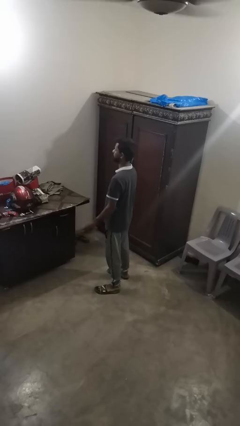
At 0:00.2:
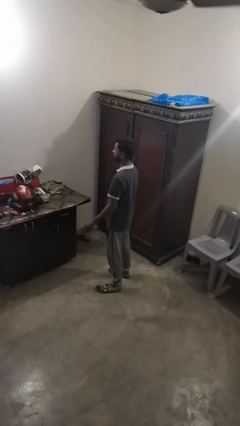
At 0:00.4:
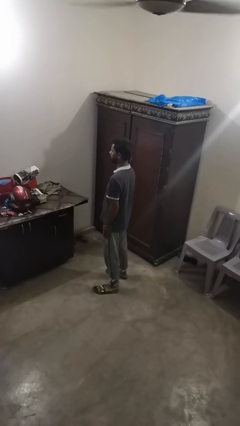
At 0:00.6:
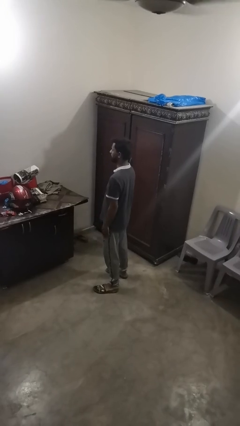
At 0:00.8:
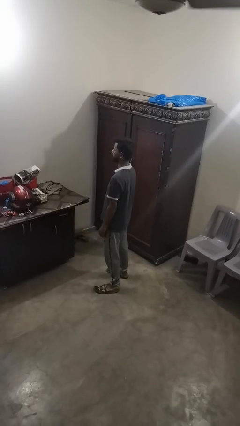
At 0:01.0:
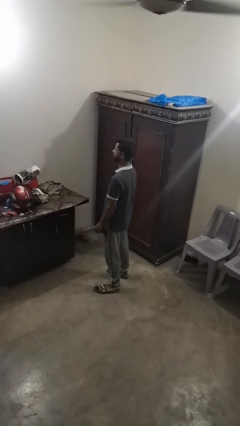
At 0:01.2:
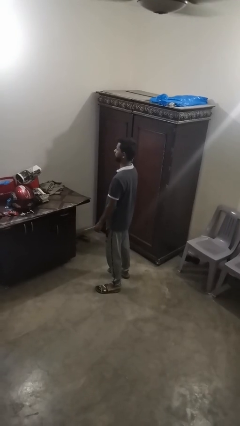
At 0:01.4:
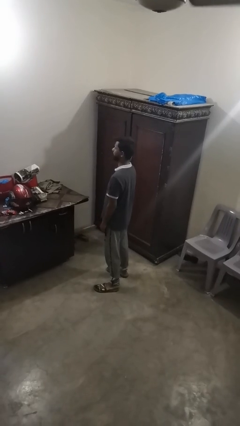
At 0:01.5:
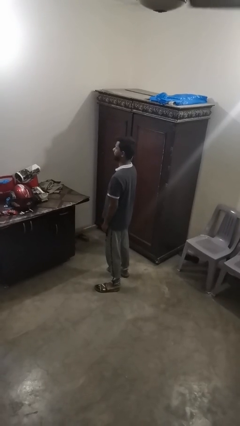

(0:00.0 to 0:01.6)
person slaps hands on thighs

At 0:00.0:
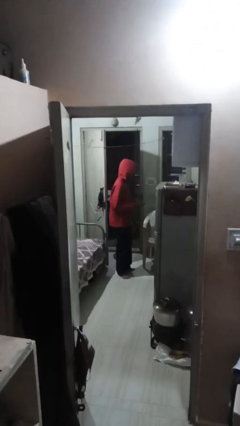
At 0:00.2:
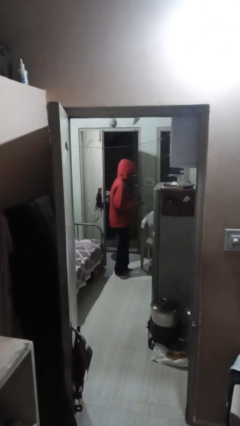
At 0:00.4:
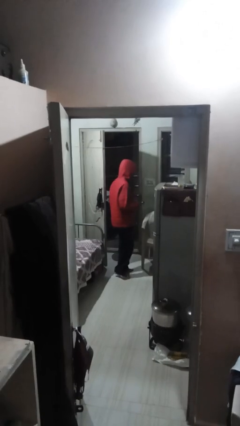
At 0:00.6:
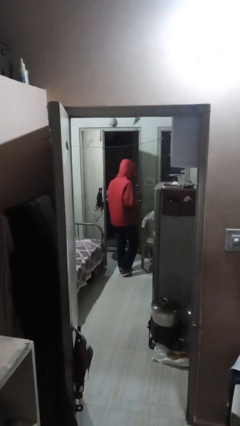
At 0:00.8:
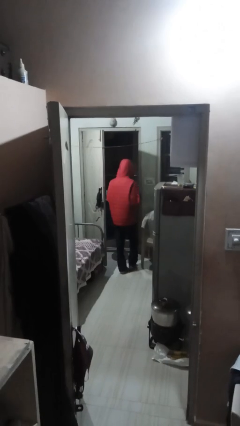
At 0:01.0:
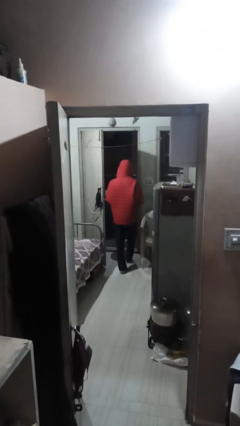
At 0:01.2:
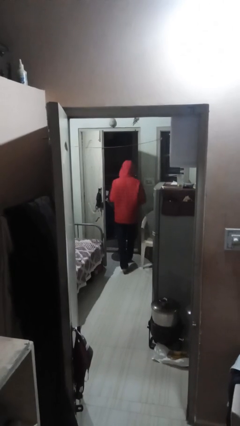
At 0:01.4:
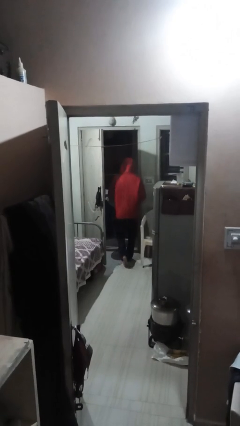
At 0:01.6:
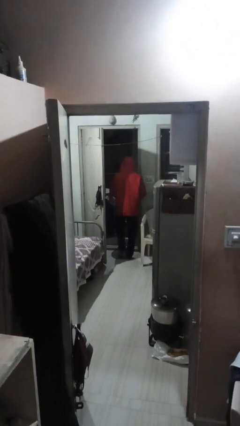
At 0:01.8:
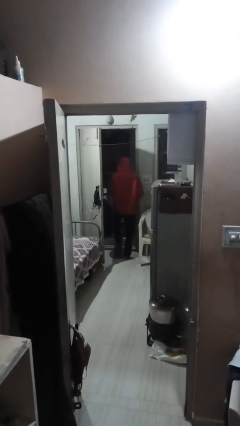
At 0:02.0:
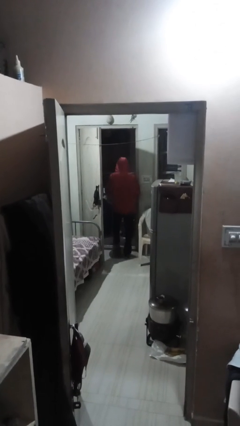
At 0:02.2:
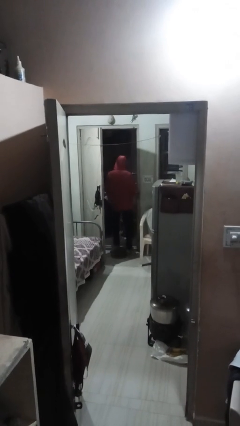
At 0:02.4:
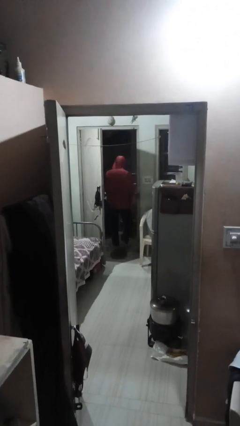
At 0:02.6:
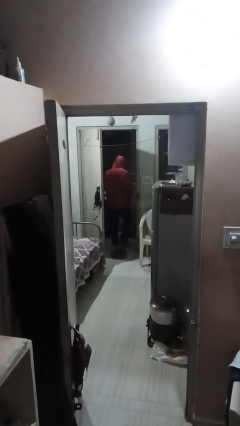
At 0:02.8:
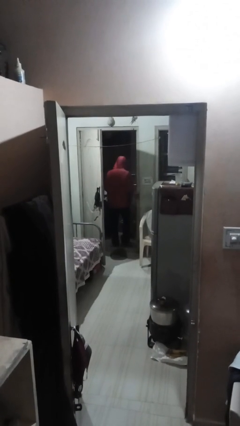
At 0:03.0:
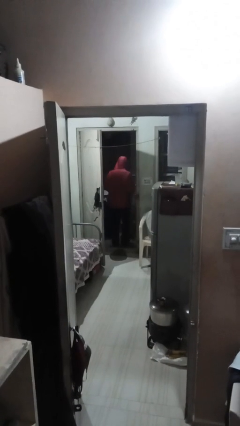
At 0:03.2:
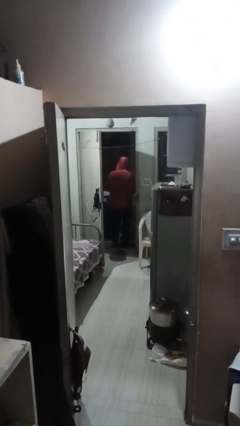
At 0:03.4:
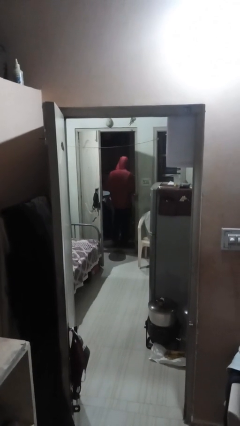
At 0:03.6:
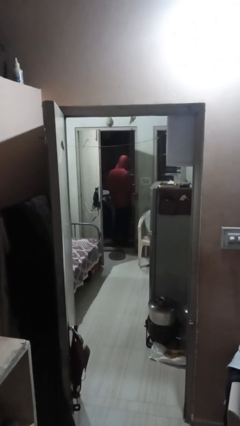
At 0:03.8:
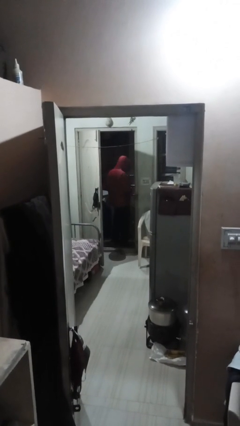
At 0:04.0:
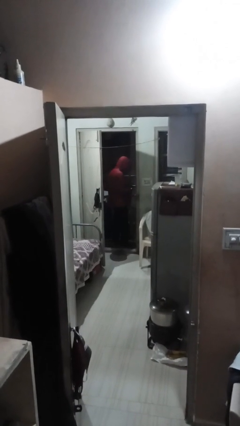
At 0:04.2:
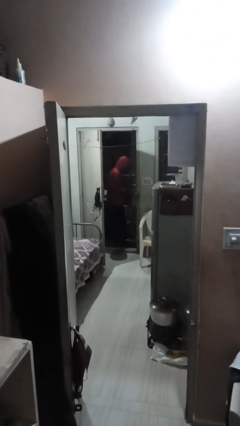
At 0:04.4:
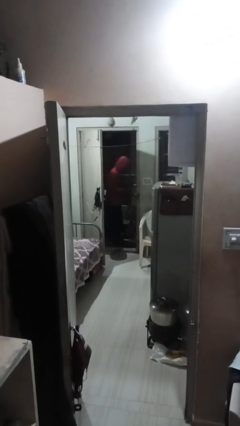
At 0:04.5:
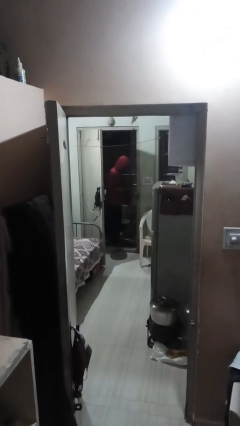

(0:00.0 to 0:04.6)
person exits scene through structure

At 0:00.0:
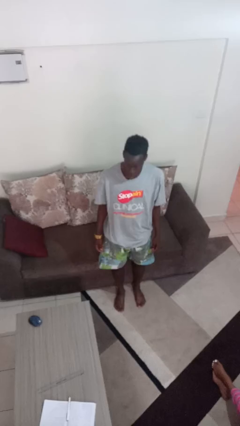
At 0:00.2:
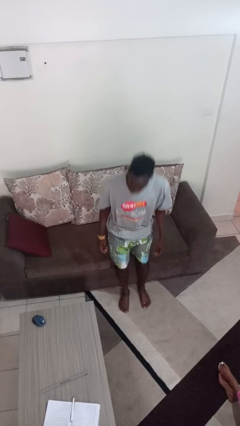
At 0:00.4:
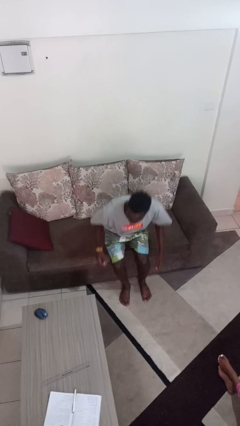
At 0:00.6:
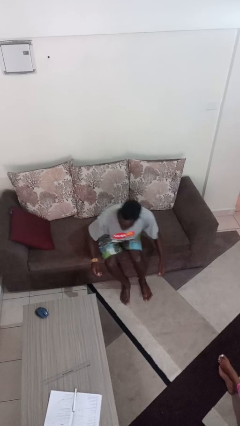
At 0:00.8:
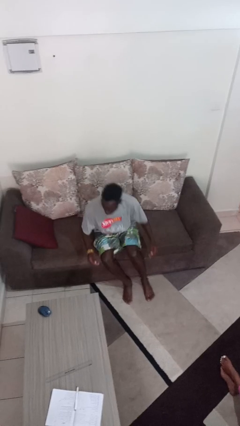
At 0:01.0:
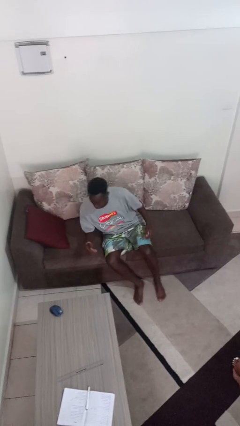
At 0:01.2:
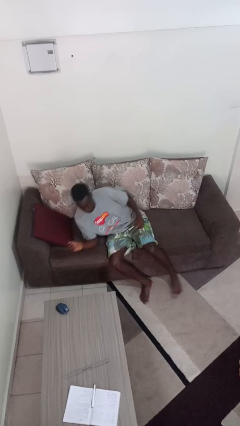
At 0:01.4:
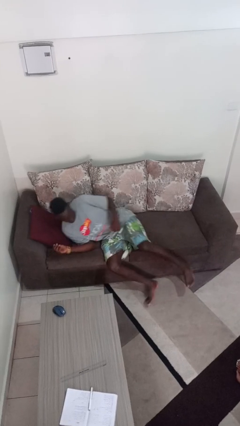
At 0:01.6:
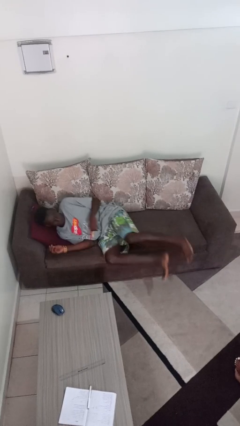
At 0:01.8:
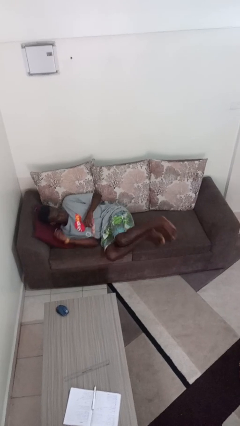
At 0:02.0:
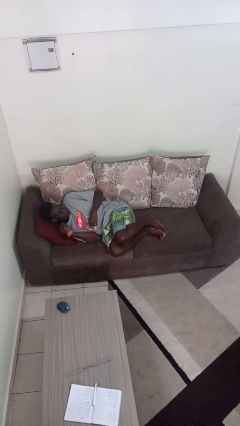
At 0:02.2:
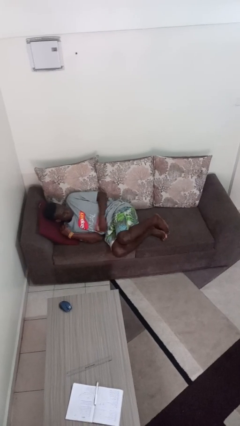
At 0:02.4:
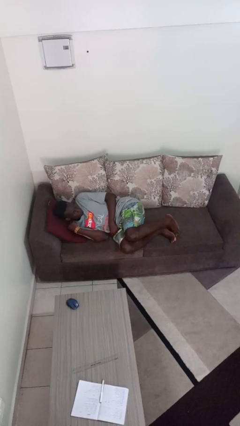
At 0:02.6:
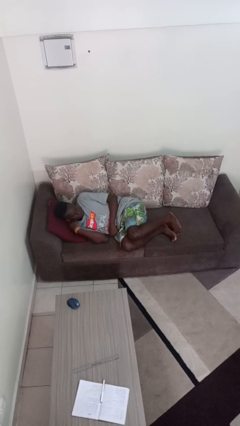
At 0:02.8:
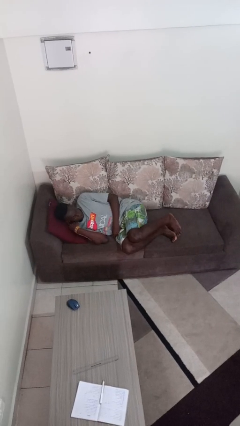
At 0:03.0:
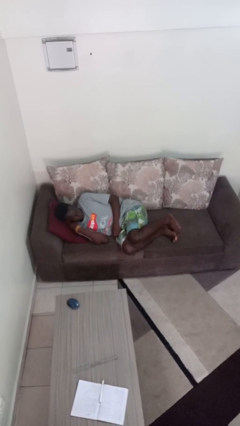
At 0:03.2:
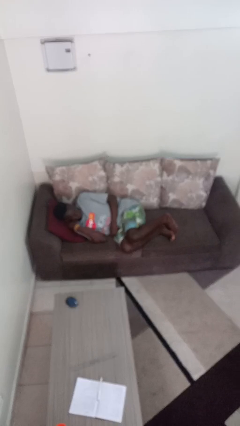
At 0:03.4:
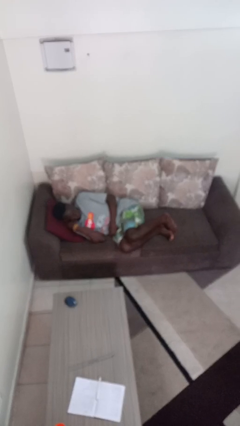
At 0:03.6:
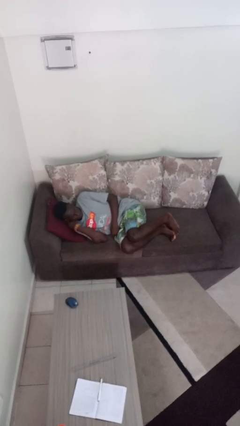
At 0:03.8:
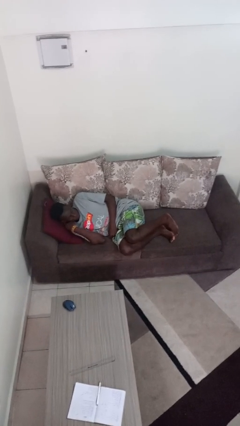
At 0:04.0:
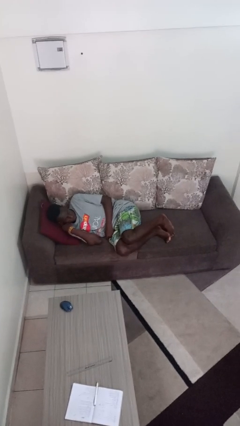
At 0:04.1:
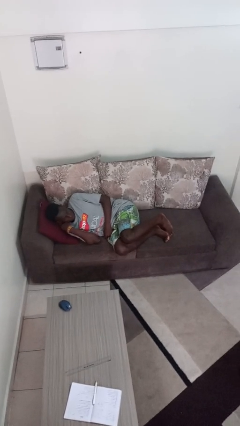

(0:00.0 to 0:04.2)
person lies down on couch

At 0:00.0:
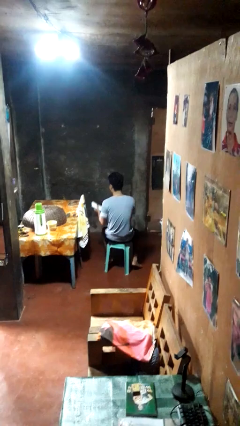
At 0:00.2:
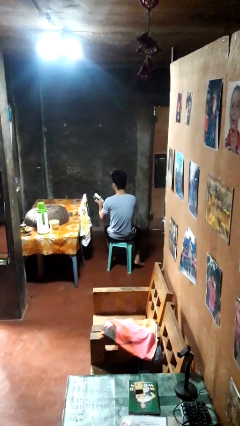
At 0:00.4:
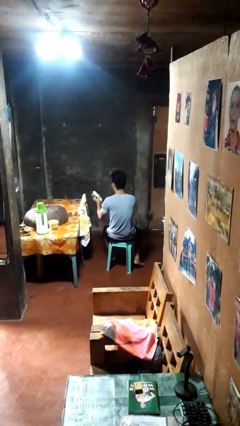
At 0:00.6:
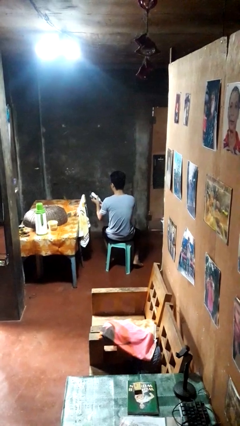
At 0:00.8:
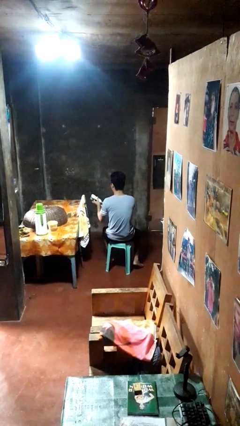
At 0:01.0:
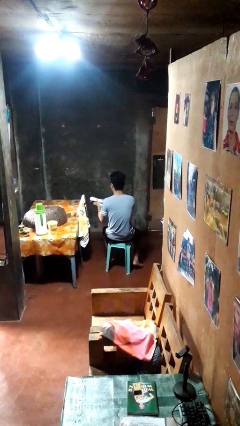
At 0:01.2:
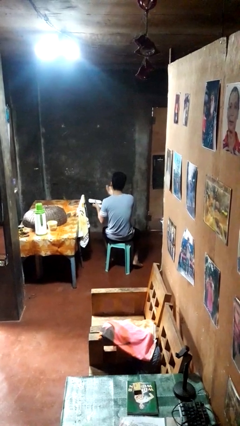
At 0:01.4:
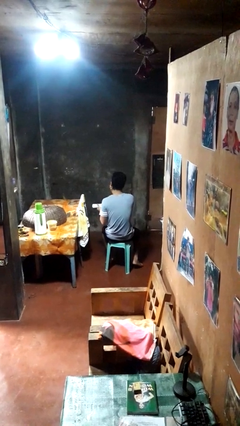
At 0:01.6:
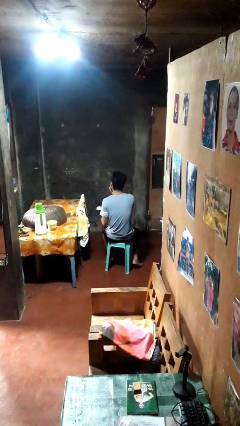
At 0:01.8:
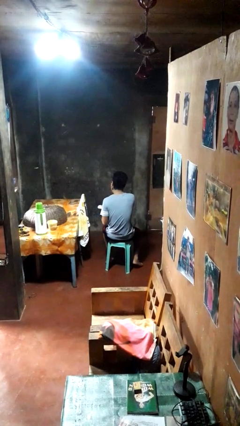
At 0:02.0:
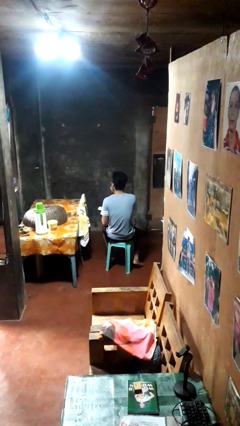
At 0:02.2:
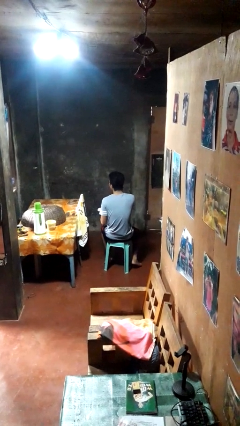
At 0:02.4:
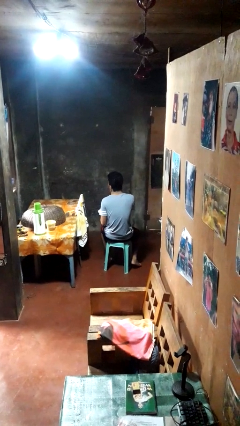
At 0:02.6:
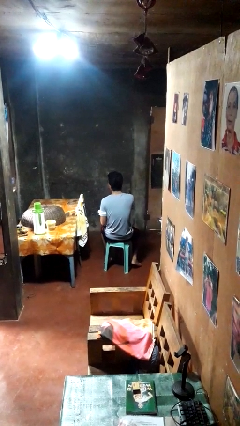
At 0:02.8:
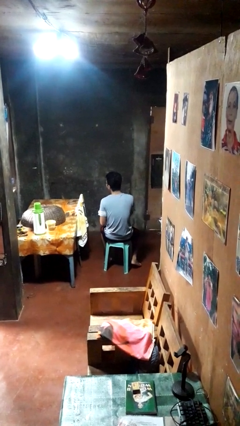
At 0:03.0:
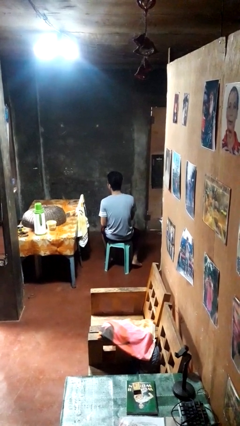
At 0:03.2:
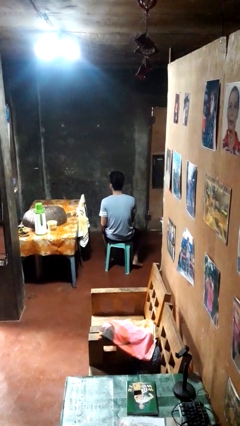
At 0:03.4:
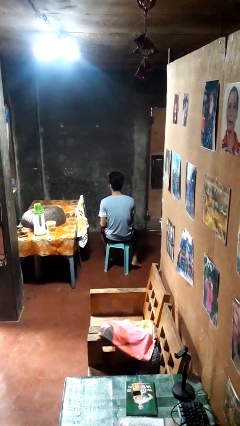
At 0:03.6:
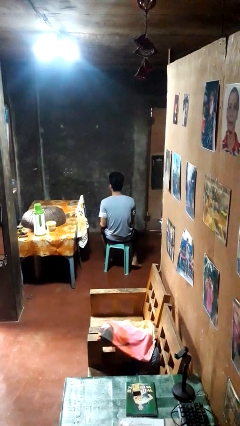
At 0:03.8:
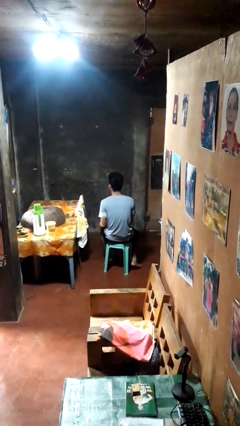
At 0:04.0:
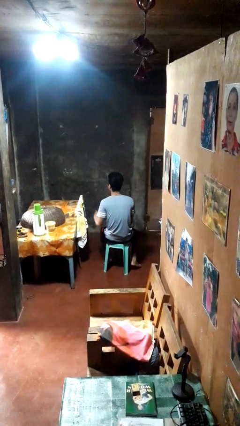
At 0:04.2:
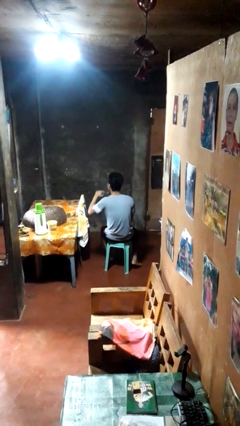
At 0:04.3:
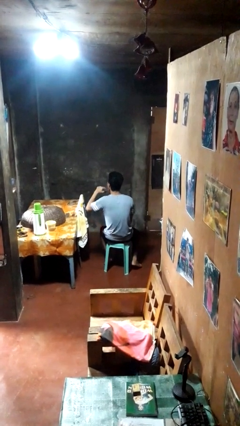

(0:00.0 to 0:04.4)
person applies shaving cream

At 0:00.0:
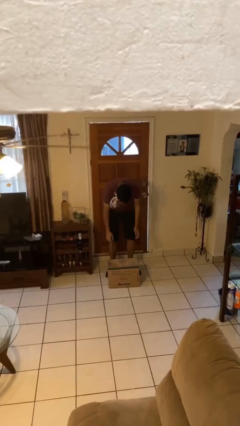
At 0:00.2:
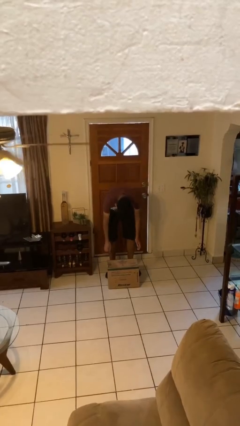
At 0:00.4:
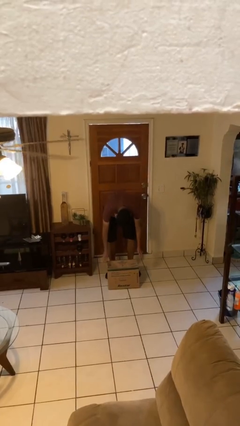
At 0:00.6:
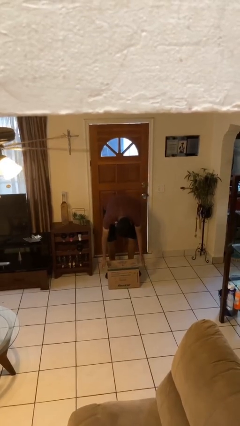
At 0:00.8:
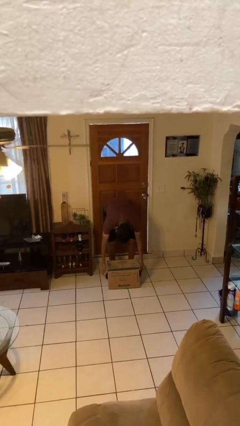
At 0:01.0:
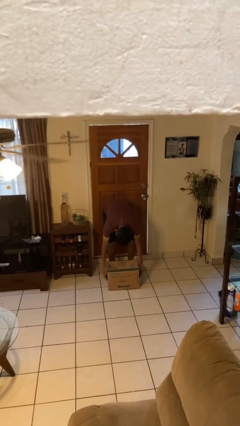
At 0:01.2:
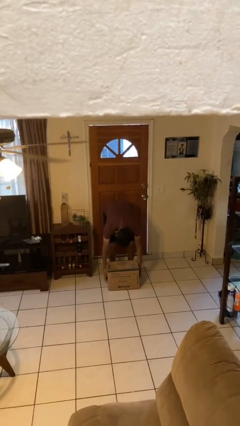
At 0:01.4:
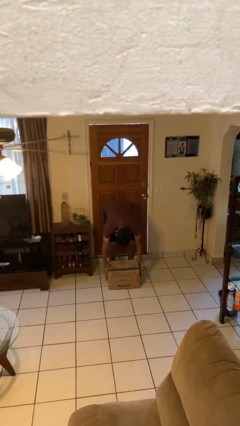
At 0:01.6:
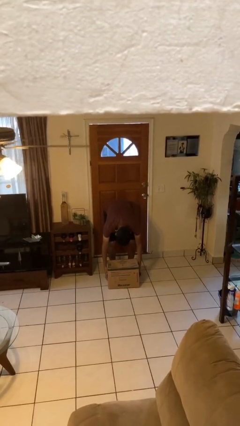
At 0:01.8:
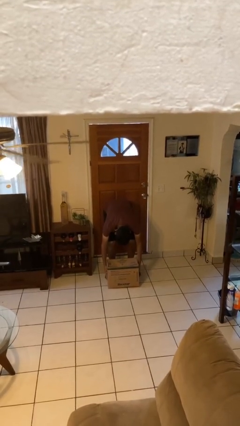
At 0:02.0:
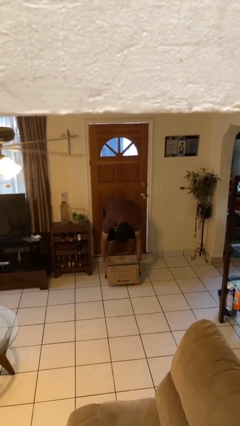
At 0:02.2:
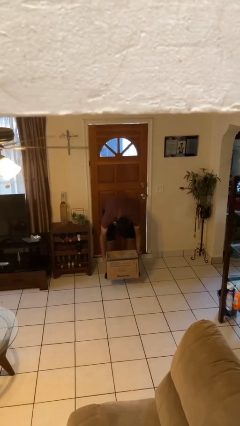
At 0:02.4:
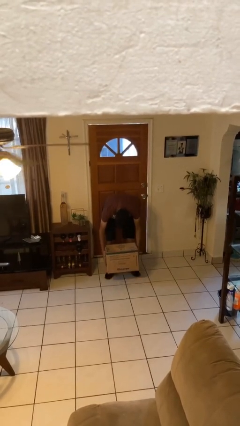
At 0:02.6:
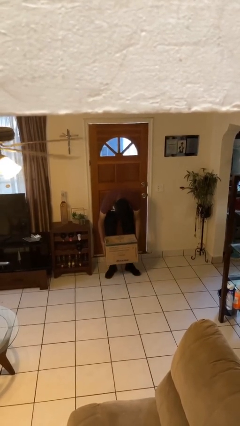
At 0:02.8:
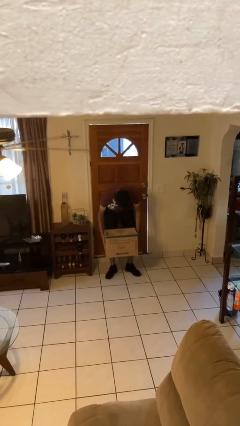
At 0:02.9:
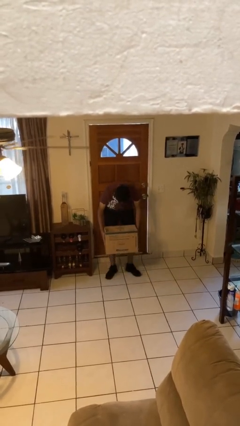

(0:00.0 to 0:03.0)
person picks up object from floor
